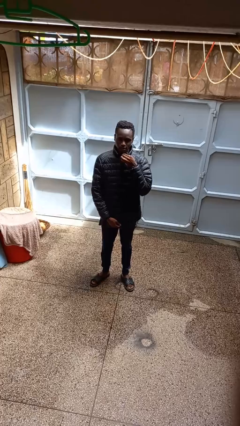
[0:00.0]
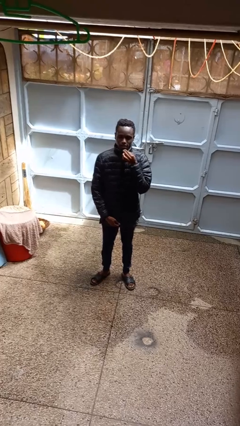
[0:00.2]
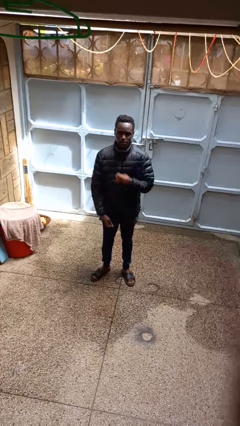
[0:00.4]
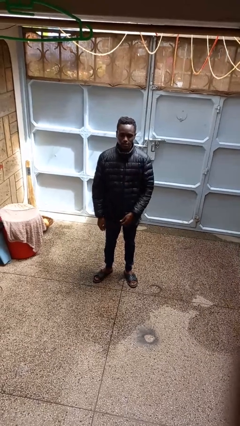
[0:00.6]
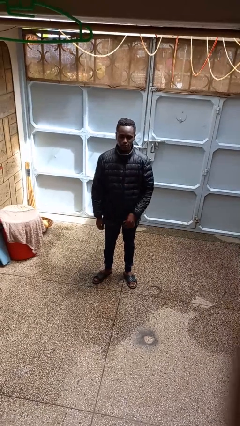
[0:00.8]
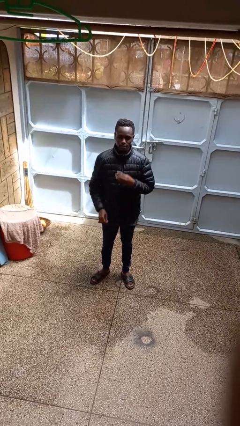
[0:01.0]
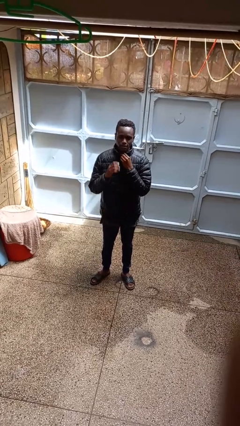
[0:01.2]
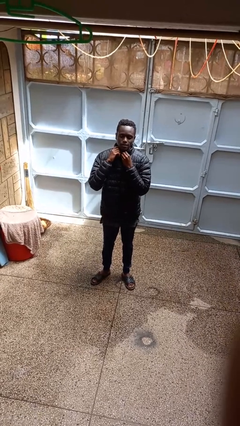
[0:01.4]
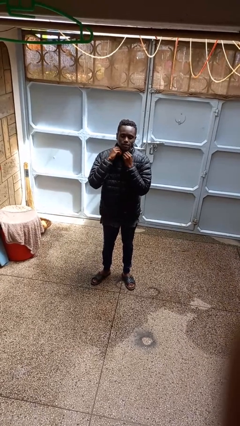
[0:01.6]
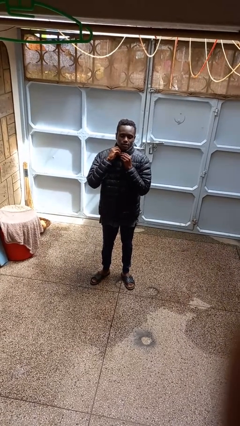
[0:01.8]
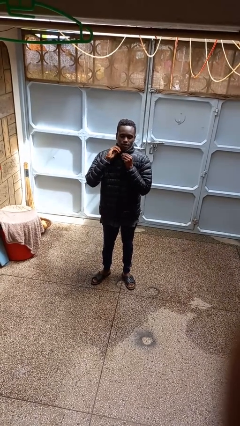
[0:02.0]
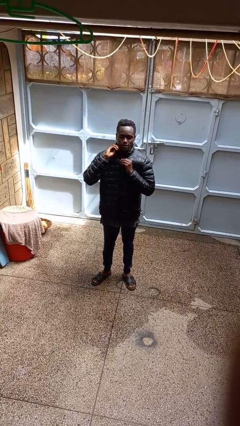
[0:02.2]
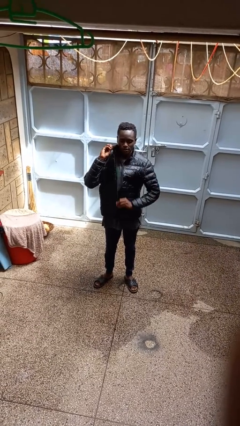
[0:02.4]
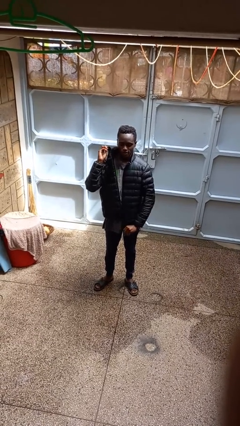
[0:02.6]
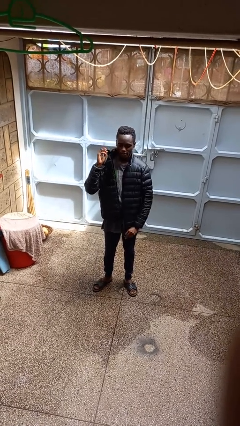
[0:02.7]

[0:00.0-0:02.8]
person unzips jacket

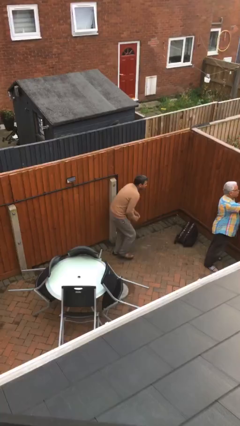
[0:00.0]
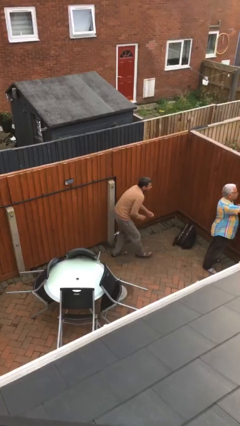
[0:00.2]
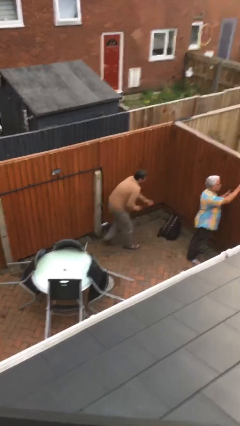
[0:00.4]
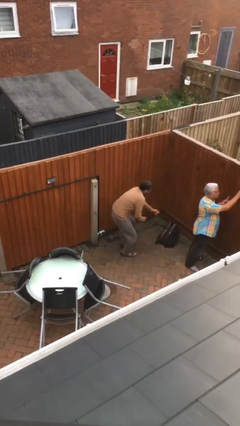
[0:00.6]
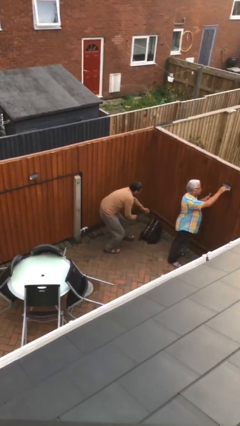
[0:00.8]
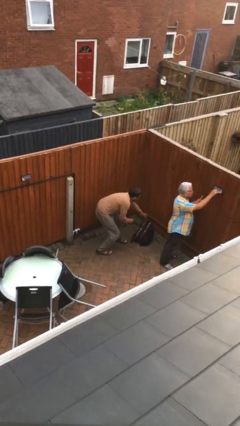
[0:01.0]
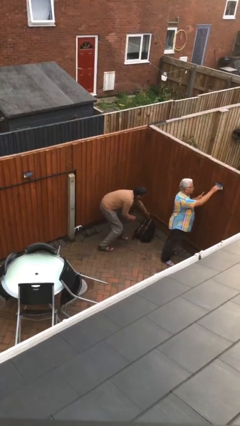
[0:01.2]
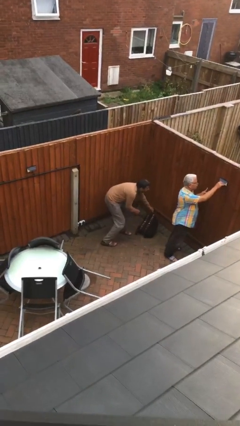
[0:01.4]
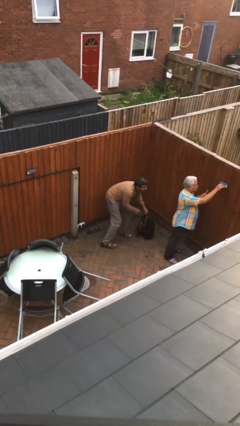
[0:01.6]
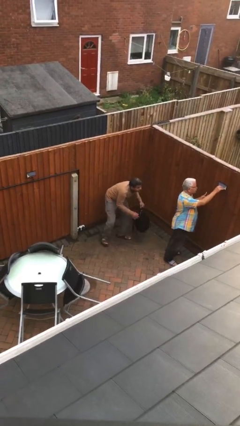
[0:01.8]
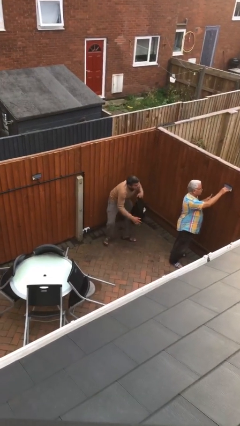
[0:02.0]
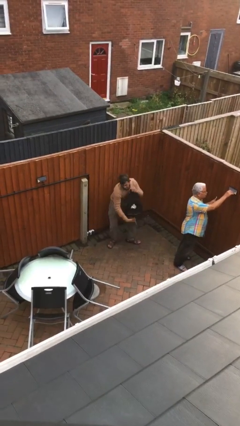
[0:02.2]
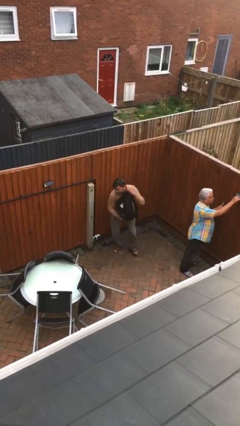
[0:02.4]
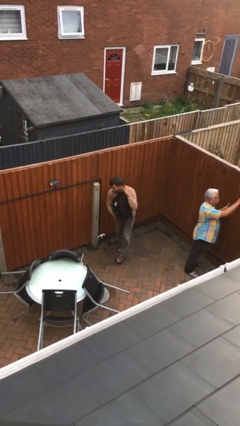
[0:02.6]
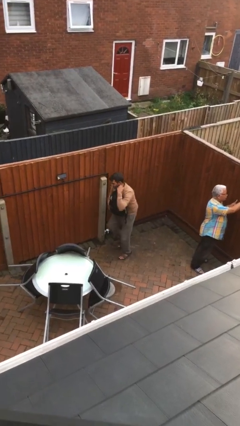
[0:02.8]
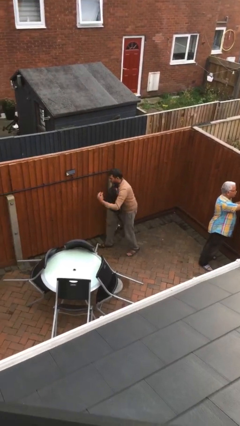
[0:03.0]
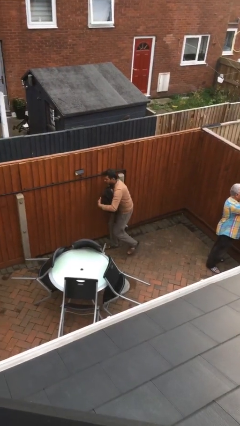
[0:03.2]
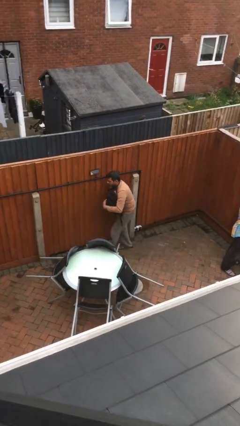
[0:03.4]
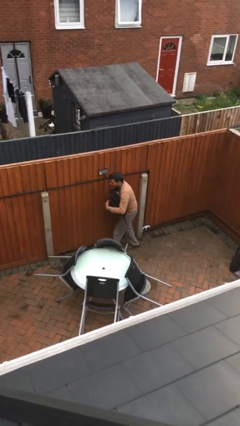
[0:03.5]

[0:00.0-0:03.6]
person steals object from person

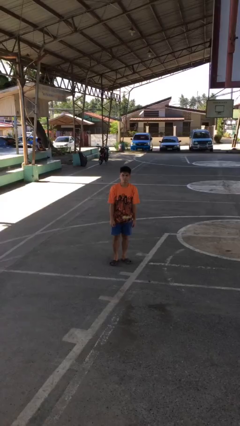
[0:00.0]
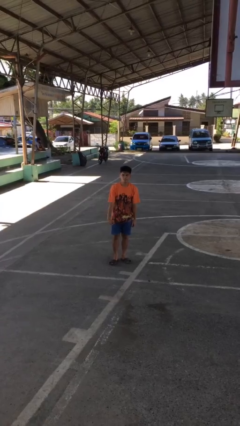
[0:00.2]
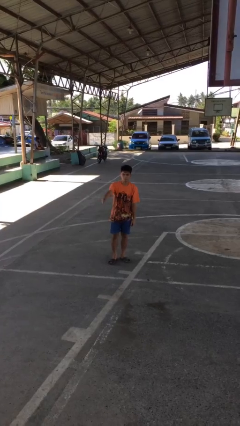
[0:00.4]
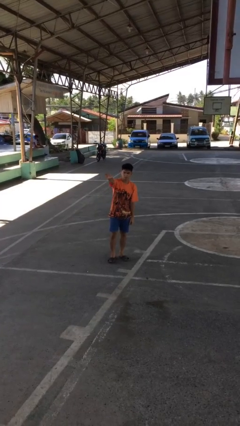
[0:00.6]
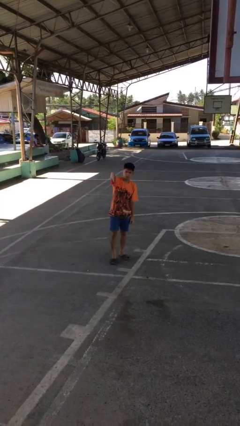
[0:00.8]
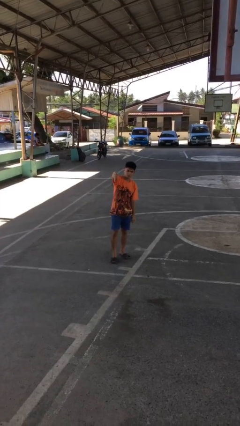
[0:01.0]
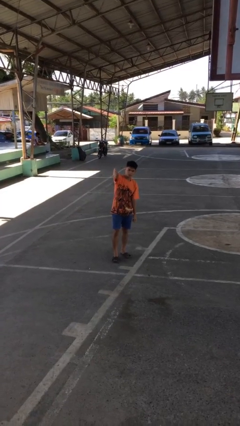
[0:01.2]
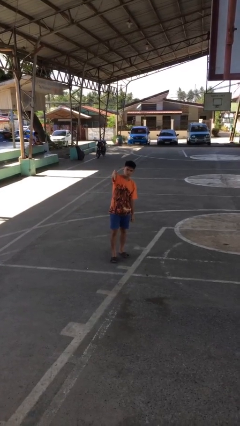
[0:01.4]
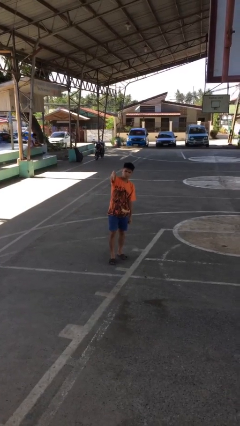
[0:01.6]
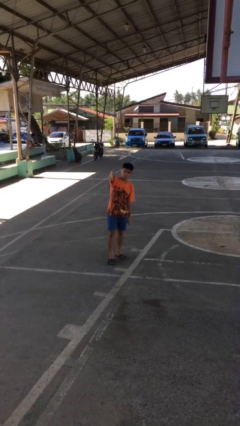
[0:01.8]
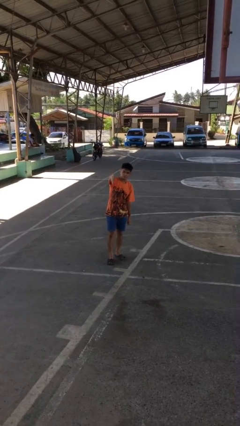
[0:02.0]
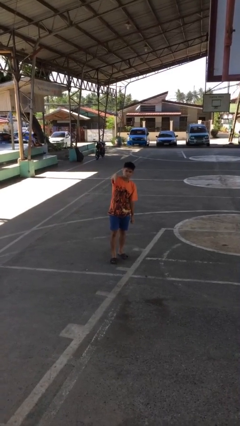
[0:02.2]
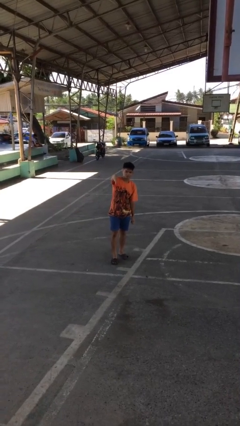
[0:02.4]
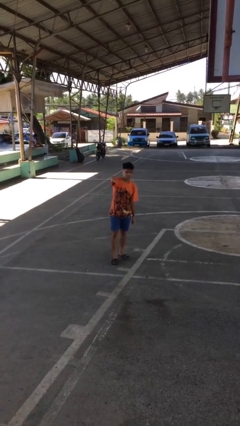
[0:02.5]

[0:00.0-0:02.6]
person gestures thumbs down

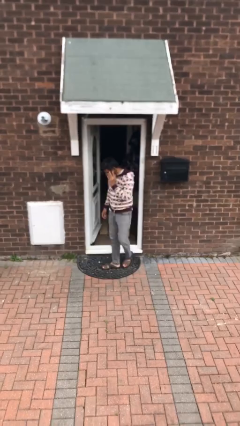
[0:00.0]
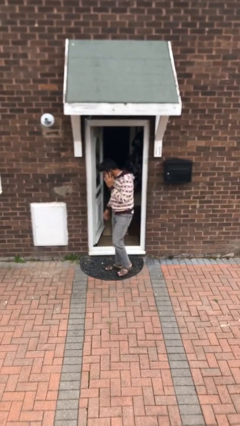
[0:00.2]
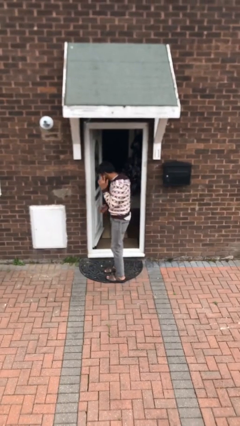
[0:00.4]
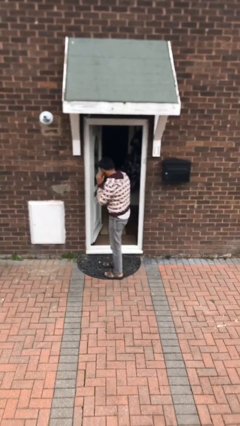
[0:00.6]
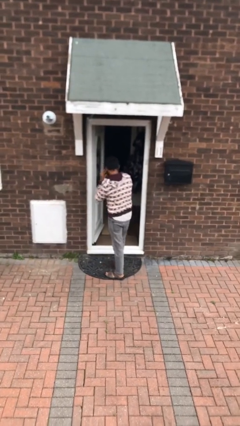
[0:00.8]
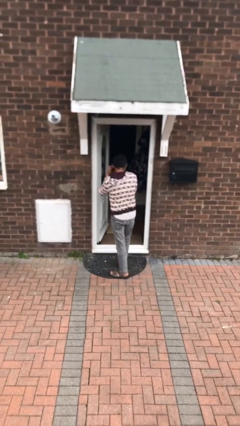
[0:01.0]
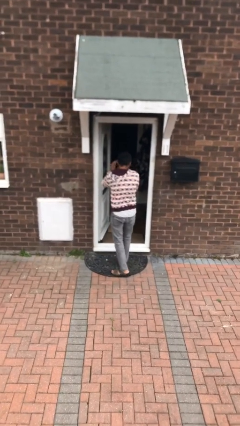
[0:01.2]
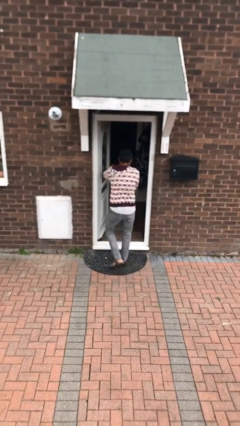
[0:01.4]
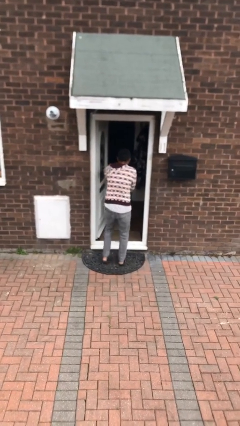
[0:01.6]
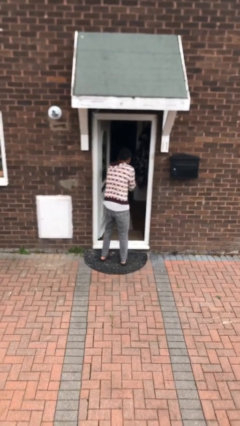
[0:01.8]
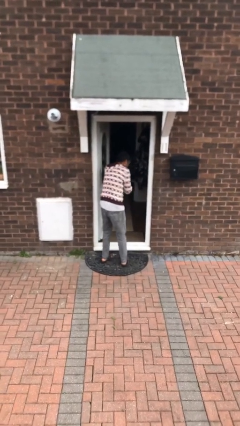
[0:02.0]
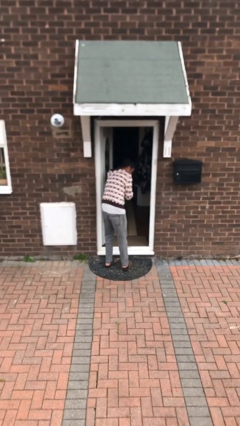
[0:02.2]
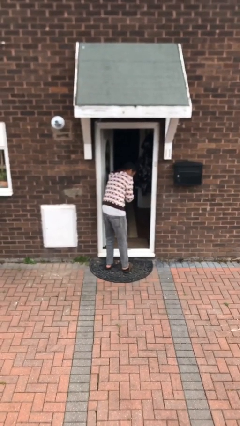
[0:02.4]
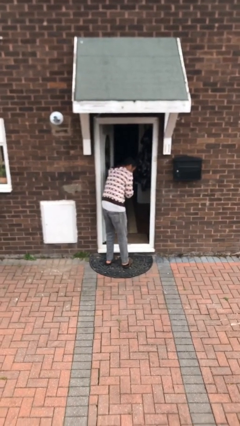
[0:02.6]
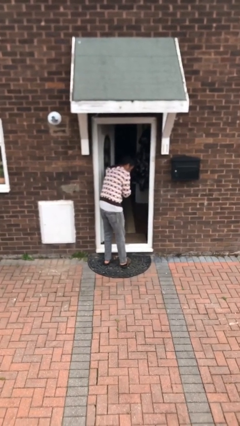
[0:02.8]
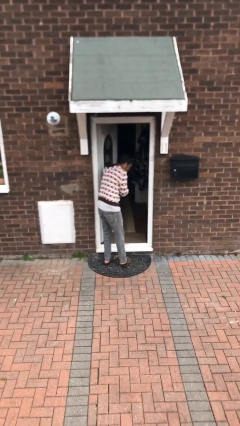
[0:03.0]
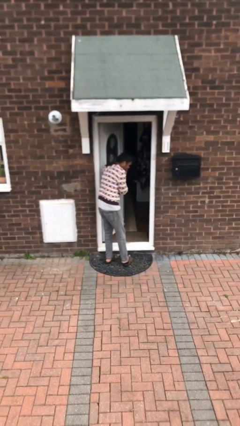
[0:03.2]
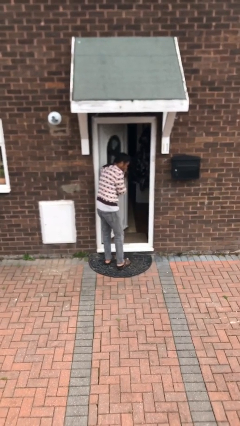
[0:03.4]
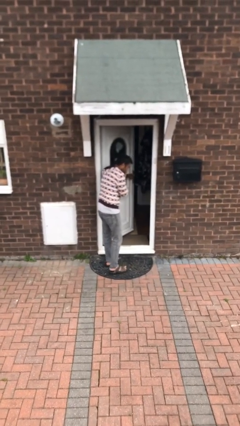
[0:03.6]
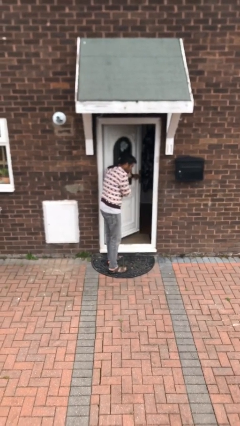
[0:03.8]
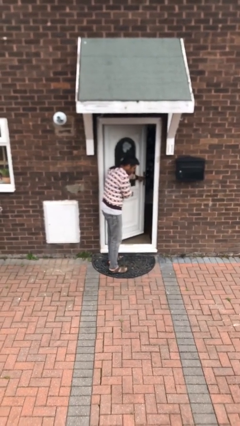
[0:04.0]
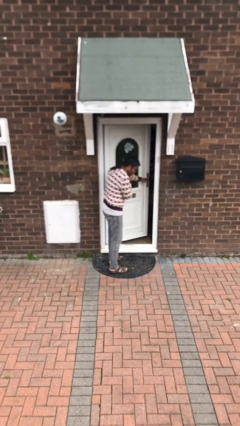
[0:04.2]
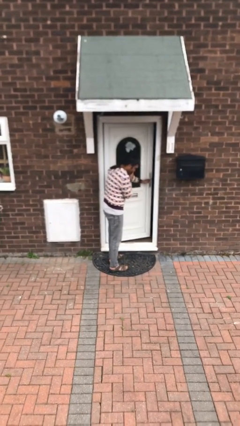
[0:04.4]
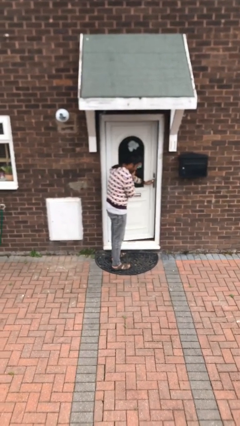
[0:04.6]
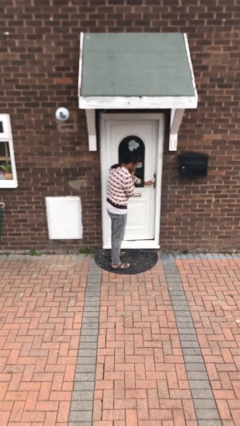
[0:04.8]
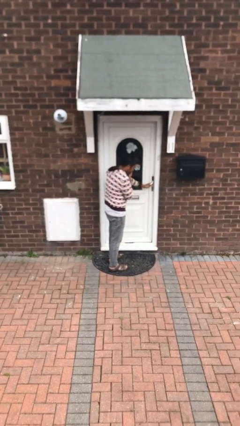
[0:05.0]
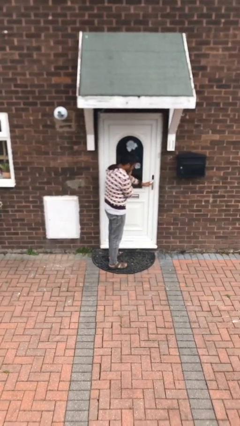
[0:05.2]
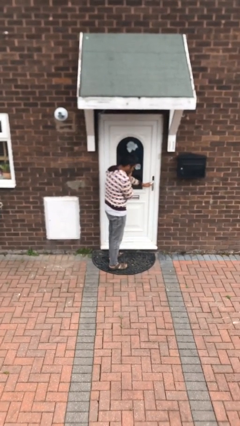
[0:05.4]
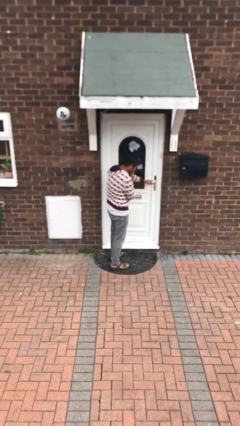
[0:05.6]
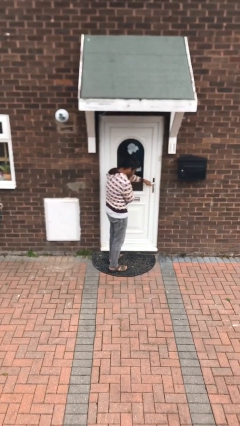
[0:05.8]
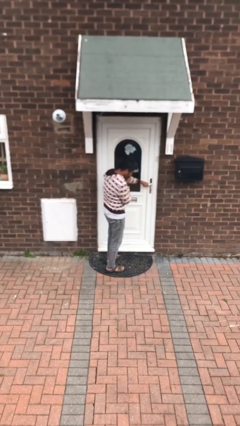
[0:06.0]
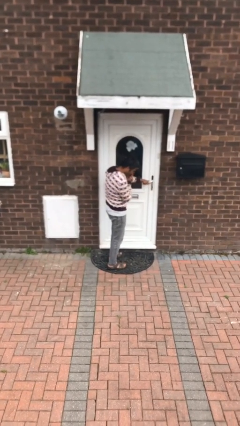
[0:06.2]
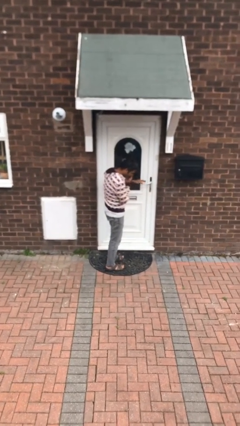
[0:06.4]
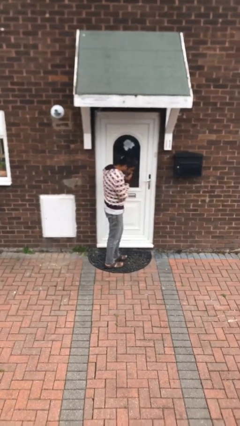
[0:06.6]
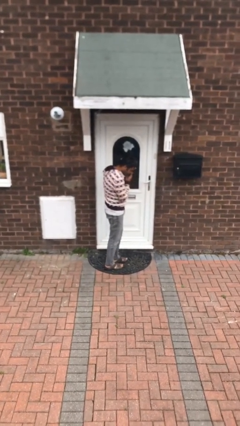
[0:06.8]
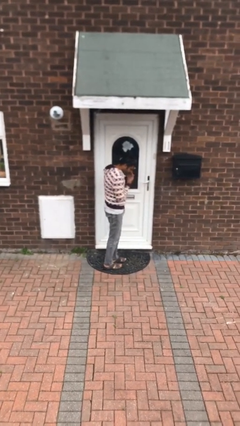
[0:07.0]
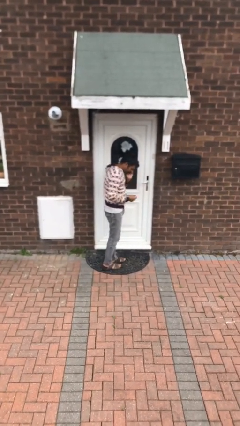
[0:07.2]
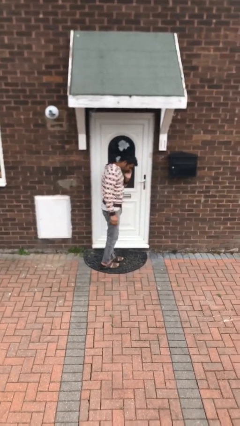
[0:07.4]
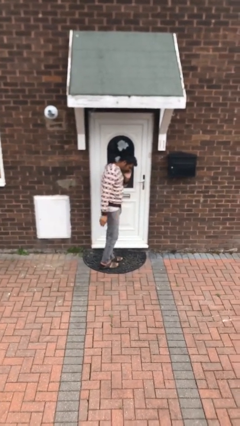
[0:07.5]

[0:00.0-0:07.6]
person closes facility door

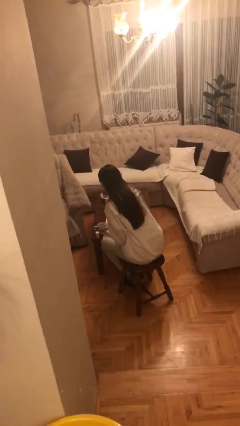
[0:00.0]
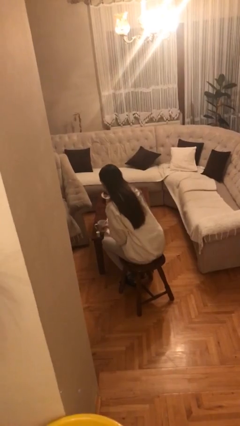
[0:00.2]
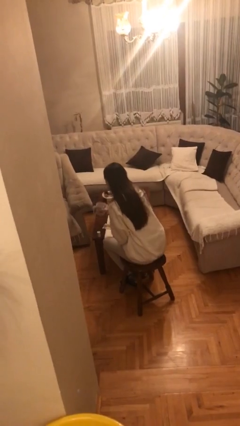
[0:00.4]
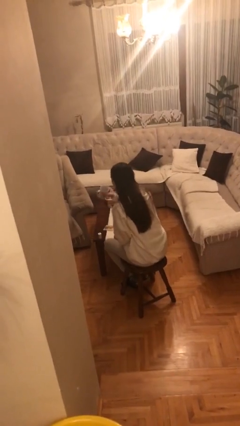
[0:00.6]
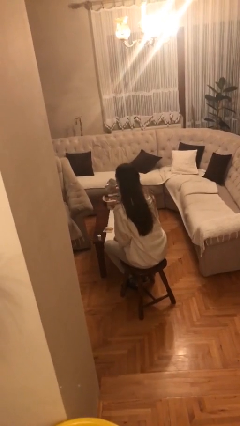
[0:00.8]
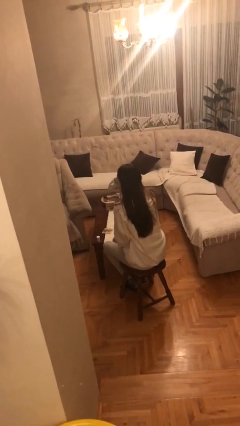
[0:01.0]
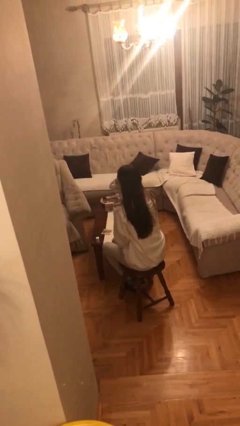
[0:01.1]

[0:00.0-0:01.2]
person drinks from cup
